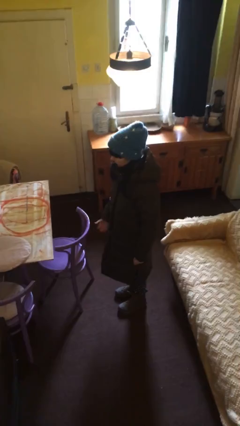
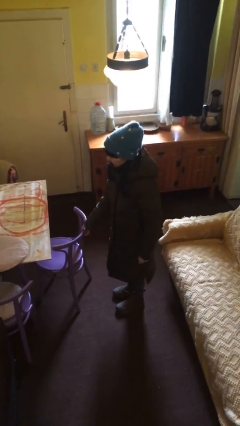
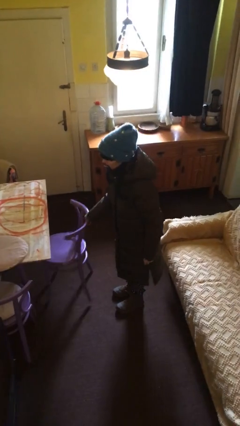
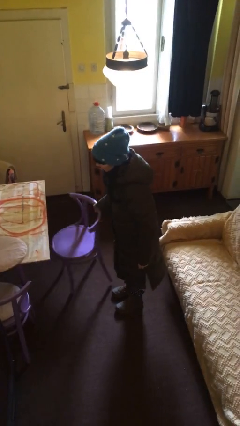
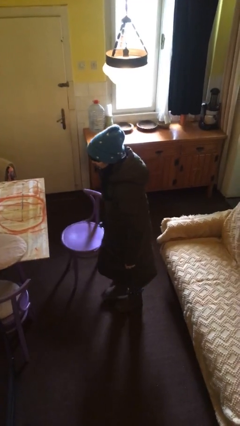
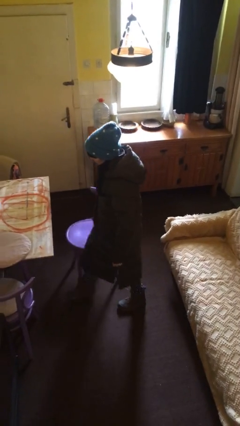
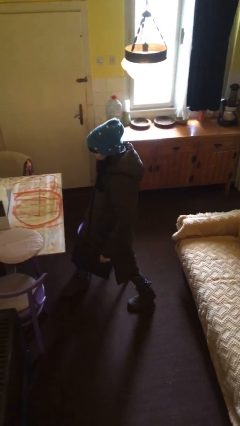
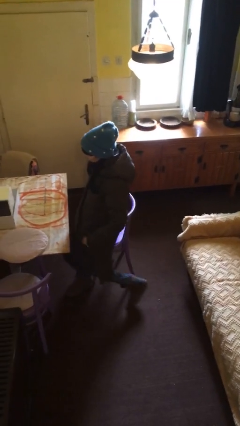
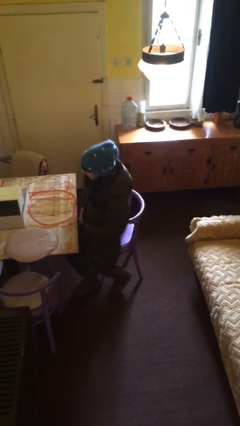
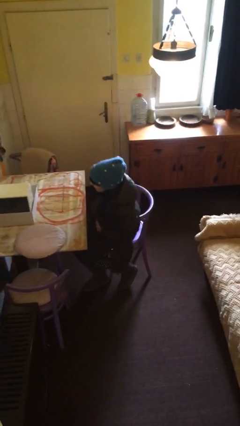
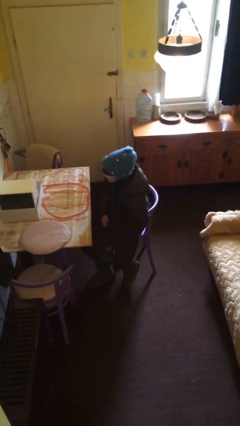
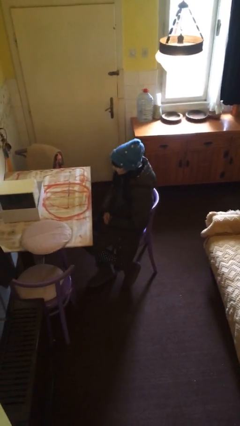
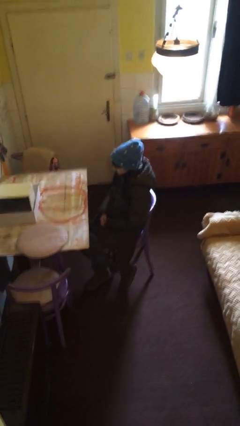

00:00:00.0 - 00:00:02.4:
person sits down

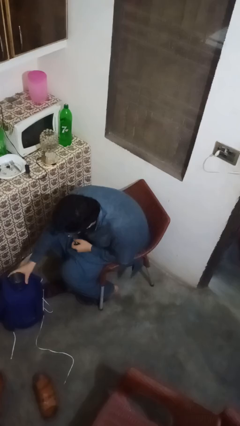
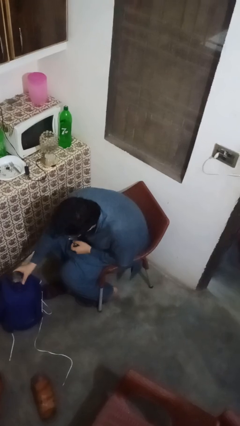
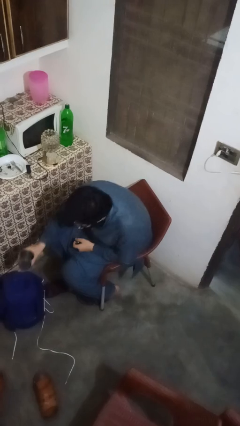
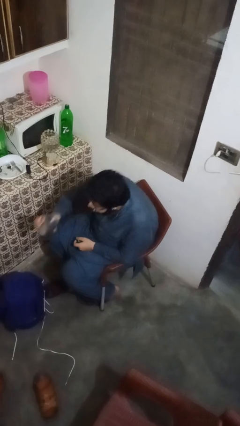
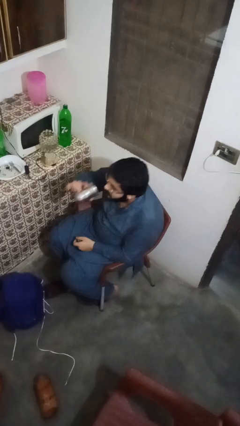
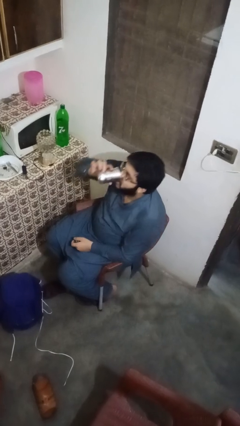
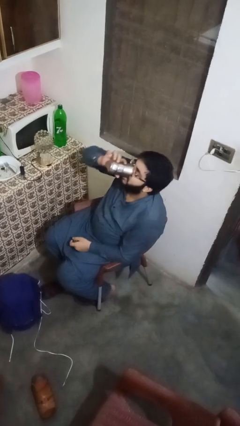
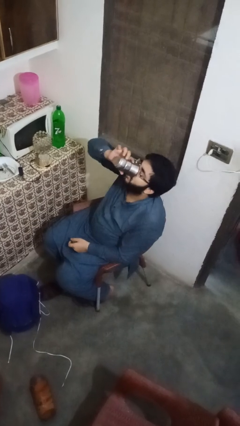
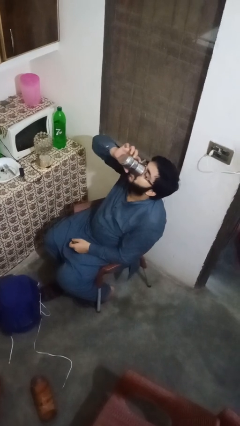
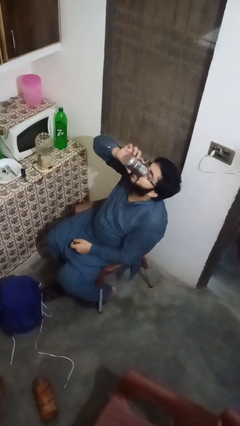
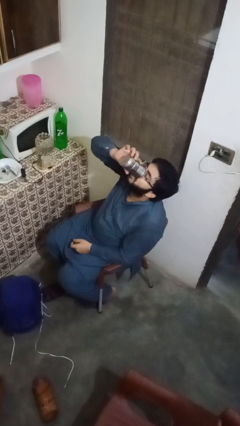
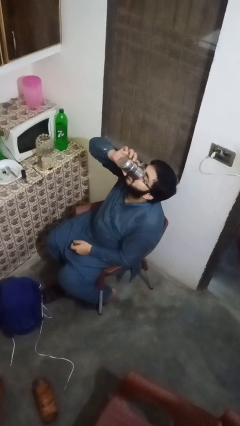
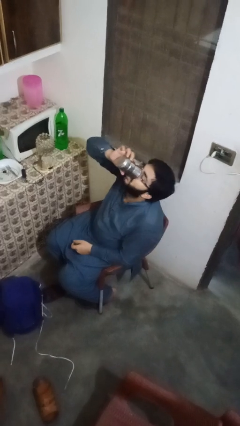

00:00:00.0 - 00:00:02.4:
person drinks from cup

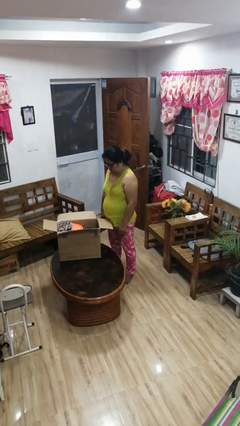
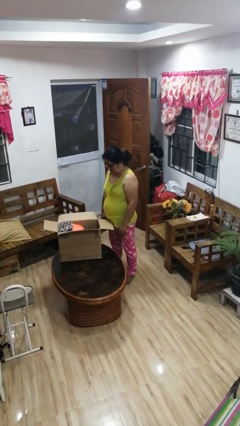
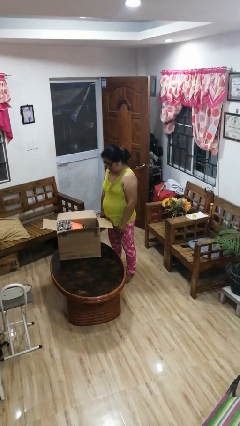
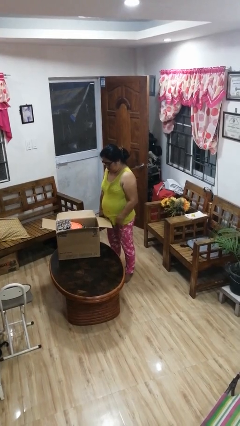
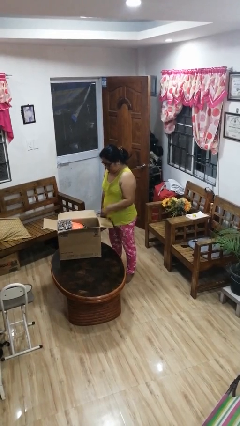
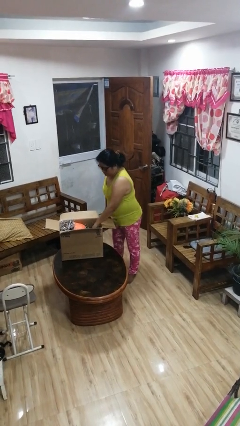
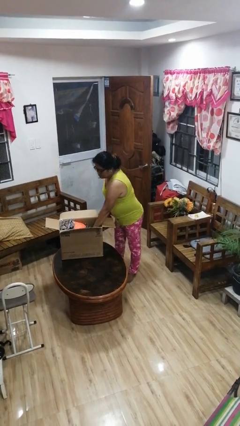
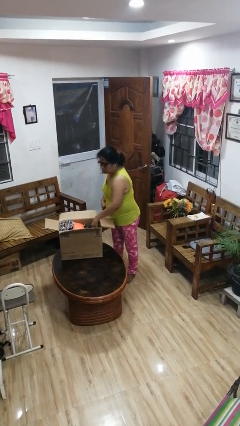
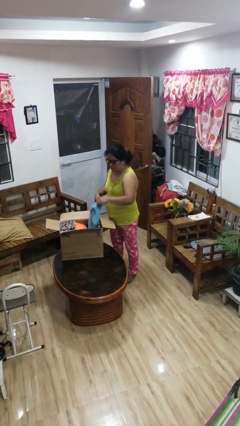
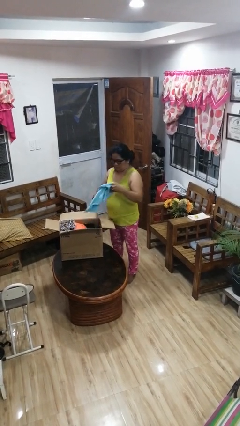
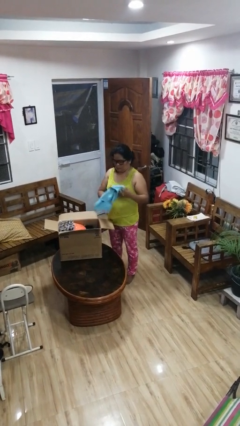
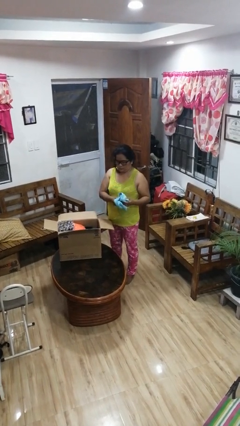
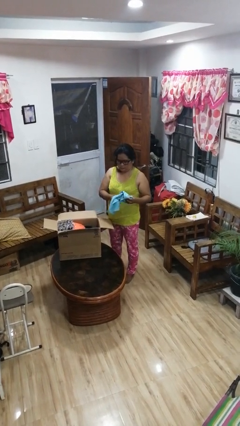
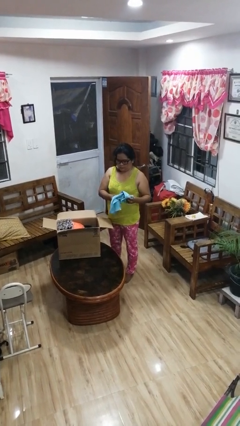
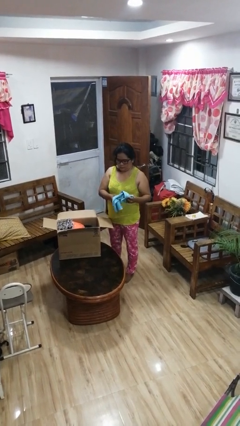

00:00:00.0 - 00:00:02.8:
person takes object from box

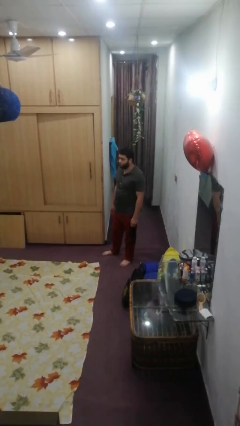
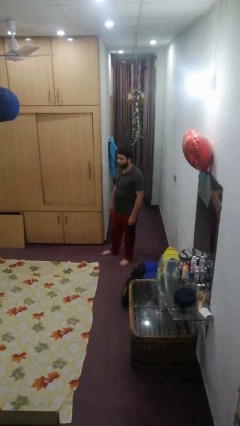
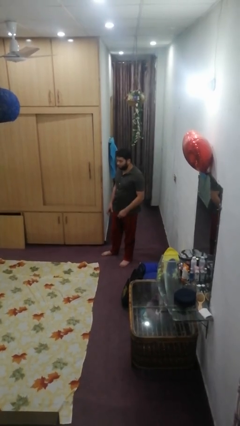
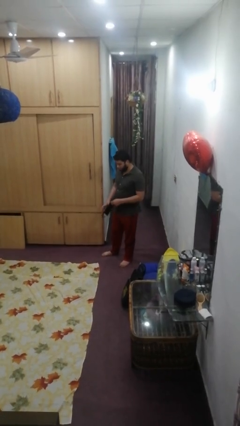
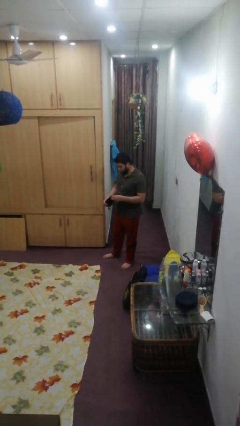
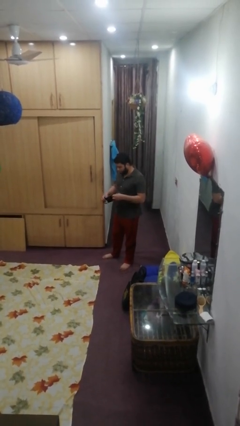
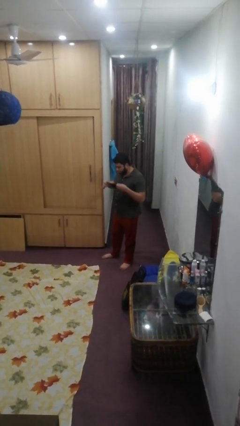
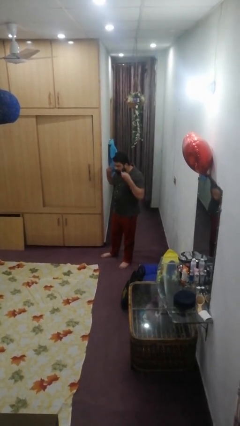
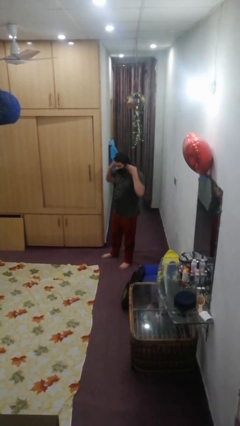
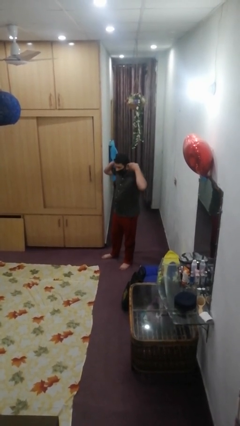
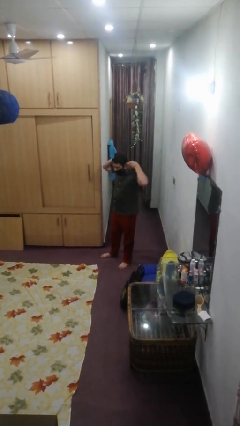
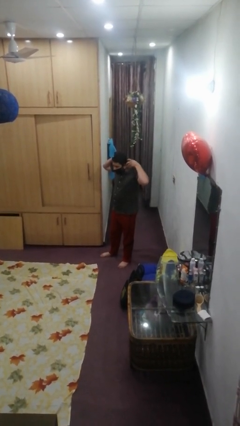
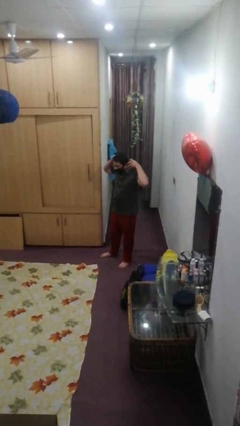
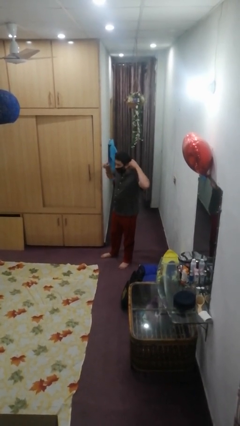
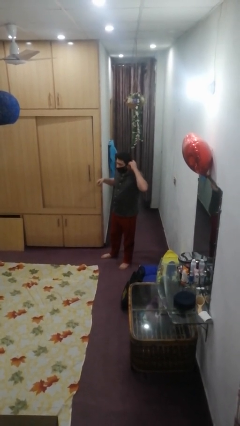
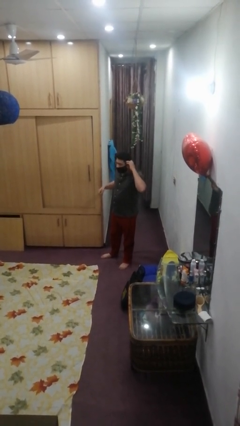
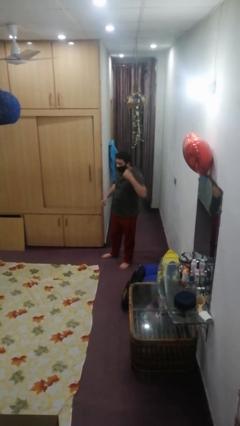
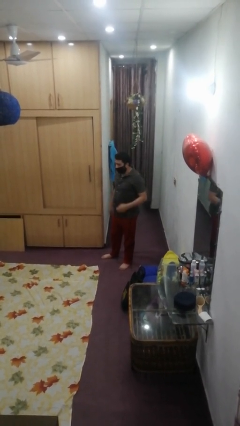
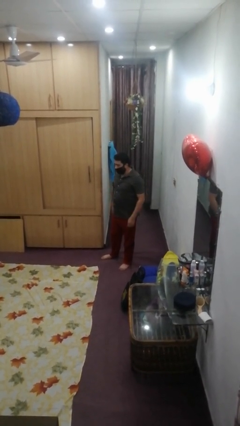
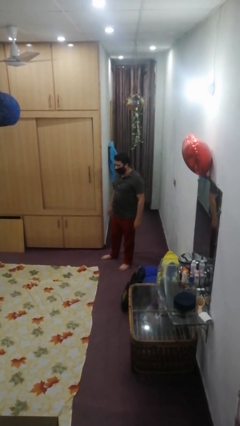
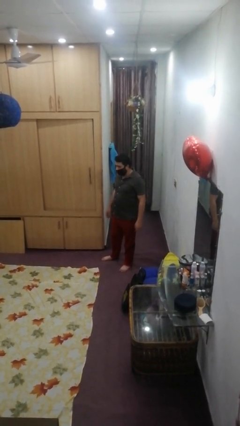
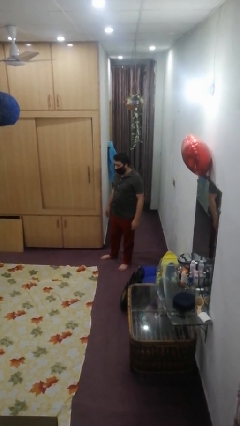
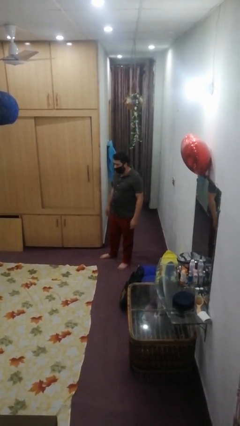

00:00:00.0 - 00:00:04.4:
person puts on facemask

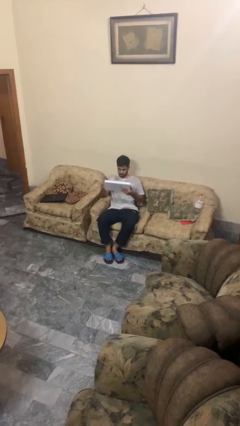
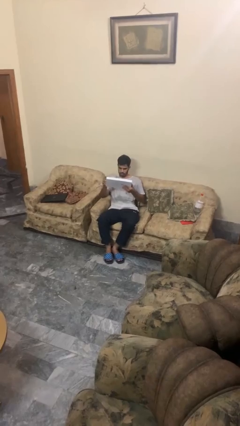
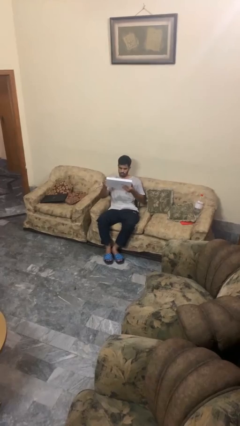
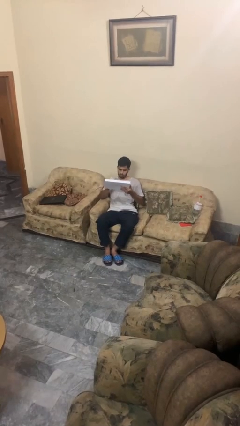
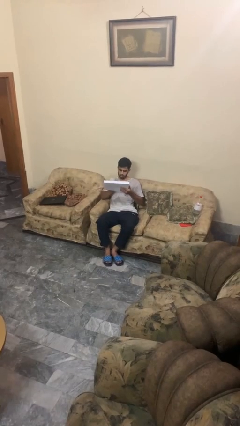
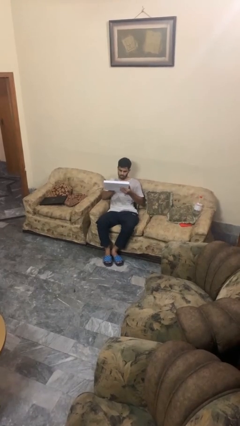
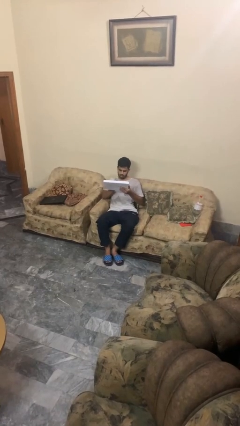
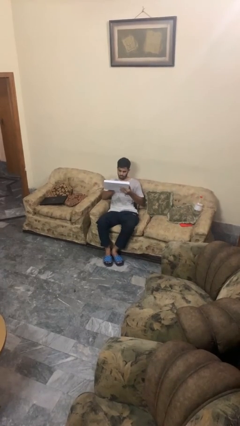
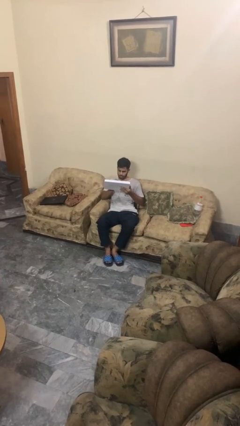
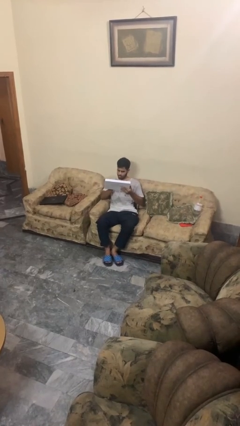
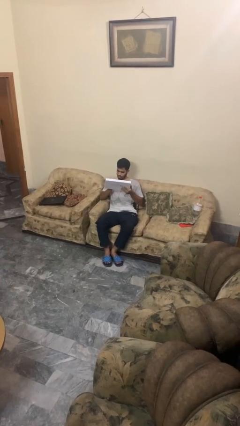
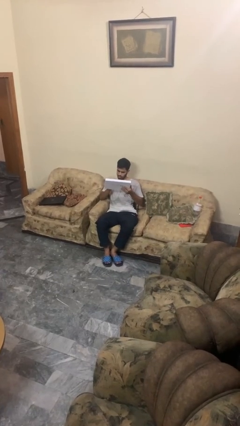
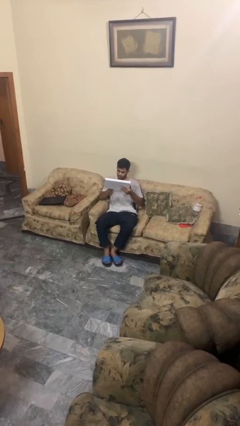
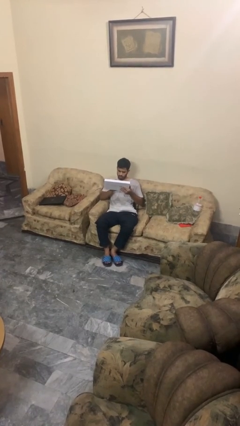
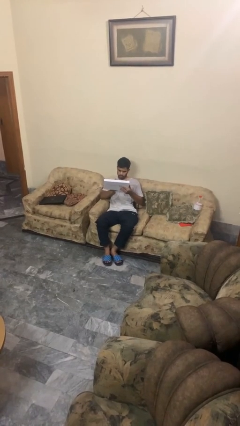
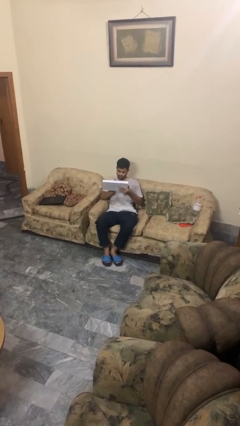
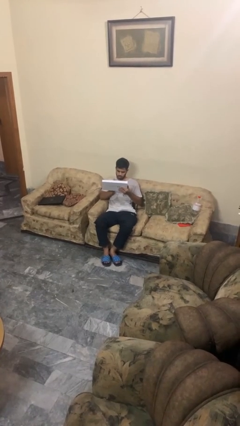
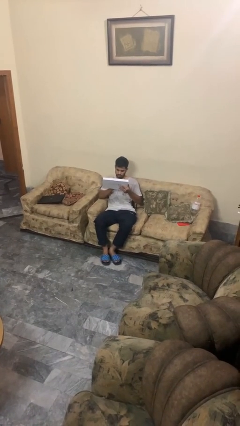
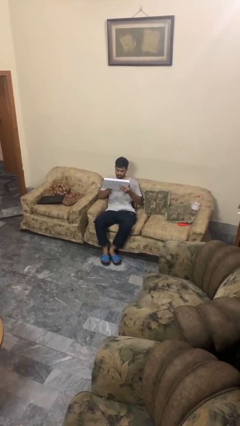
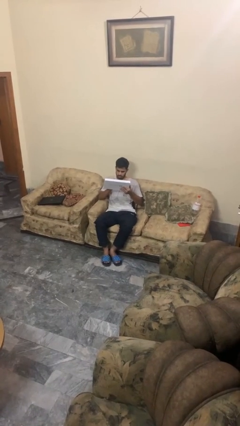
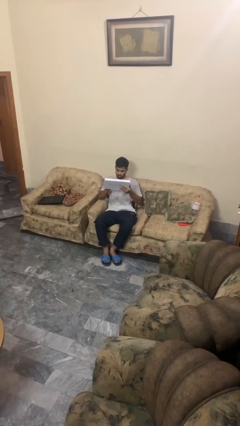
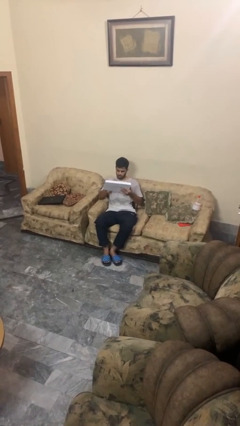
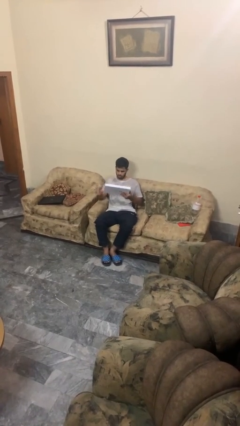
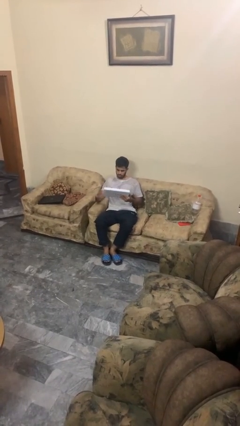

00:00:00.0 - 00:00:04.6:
person interacts with tablet

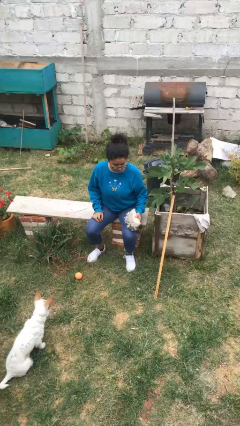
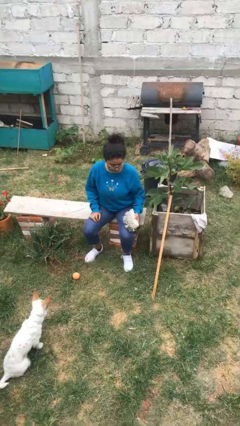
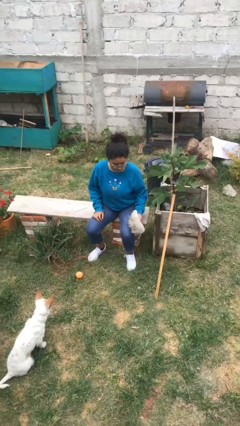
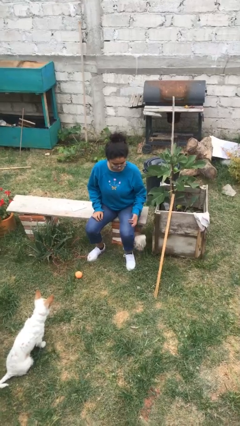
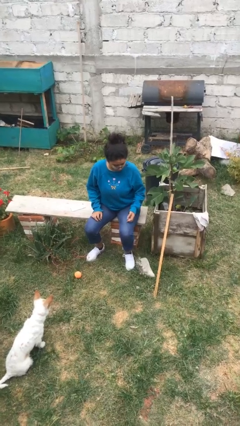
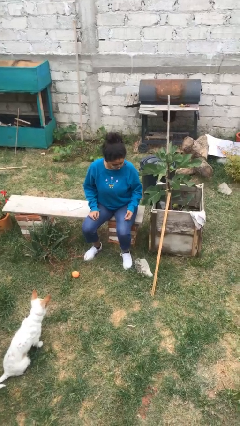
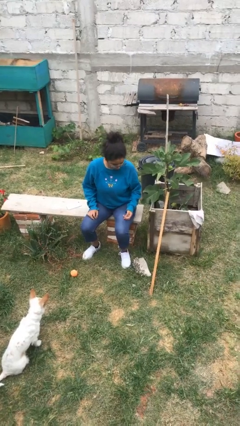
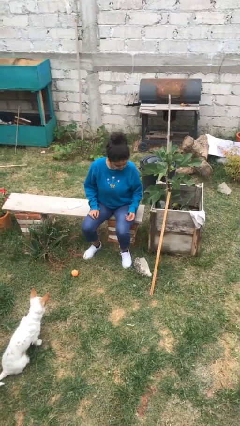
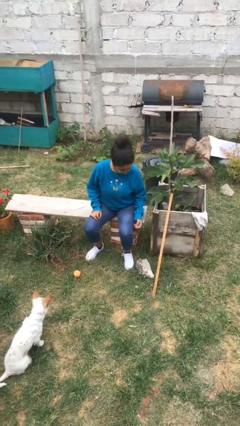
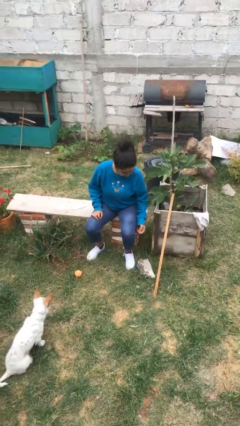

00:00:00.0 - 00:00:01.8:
person drops object
